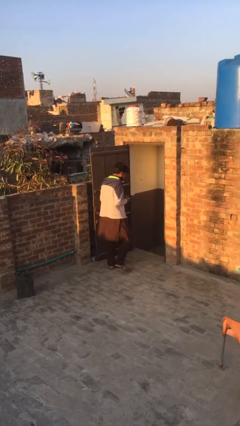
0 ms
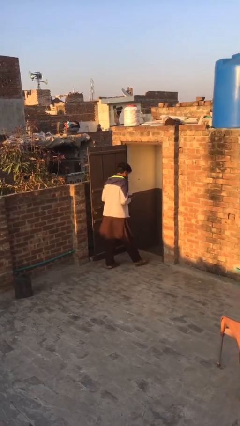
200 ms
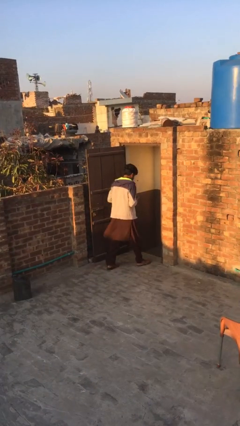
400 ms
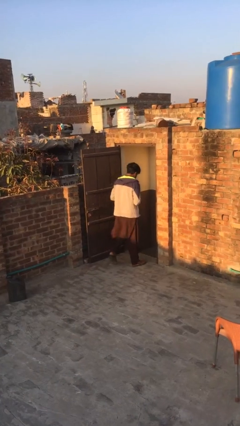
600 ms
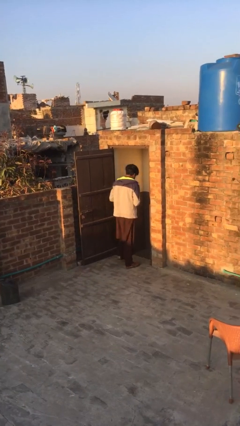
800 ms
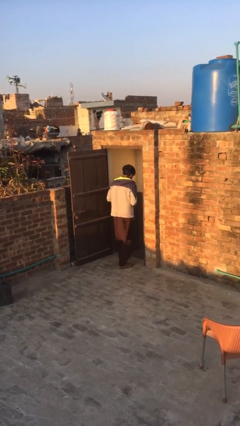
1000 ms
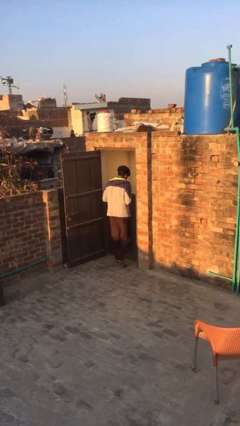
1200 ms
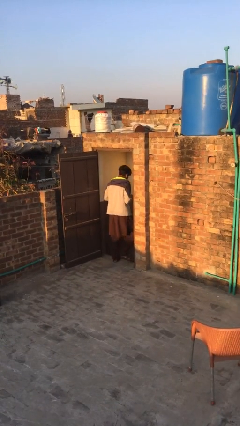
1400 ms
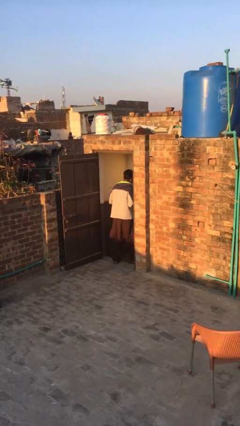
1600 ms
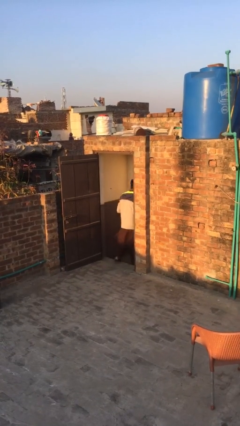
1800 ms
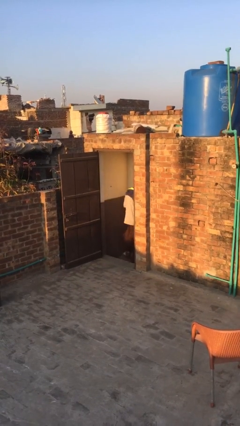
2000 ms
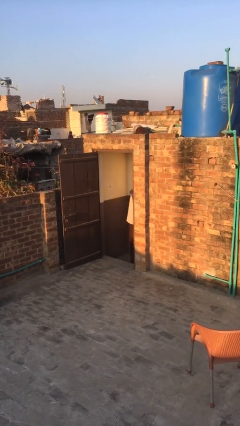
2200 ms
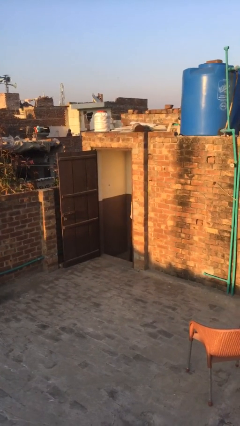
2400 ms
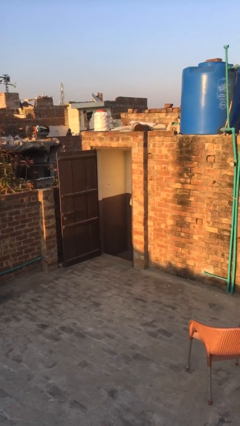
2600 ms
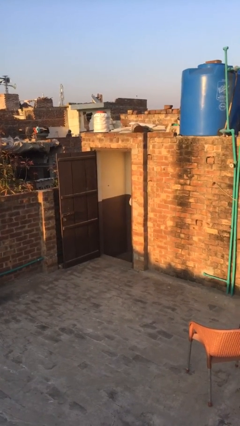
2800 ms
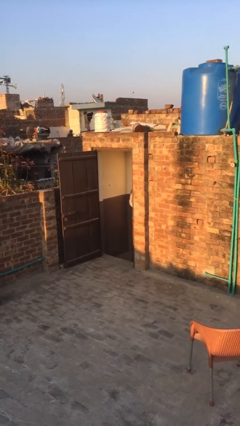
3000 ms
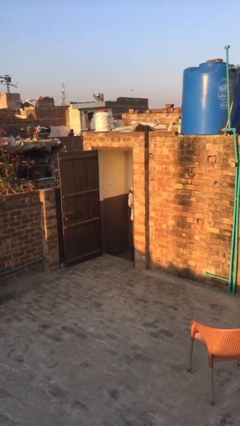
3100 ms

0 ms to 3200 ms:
person enters scene through structure

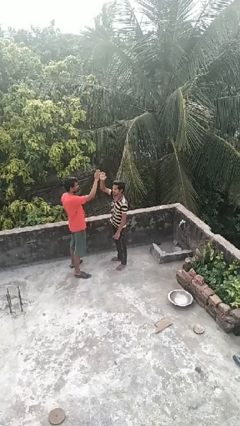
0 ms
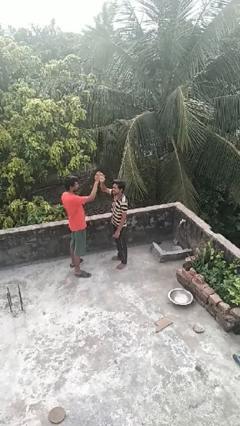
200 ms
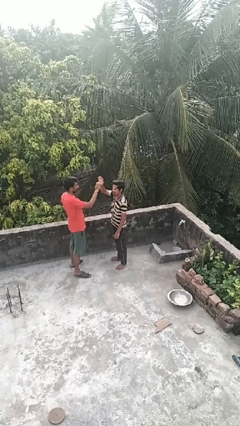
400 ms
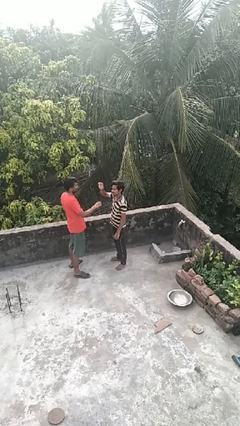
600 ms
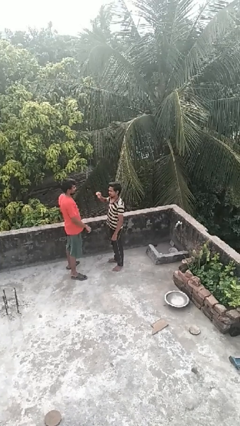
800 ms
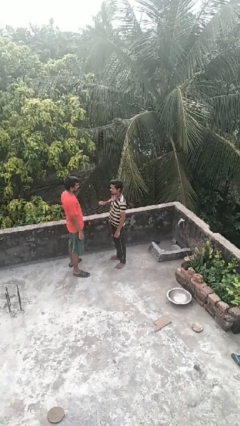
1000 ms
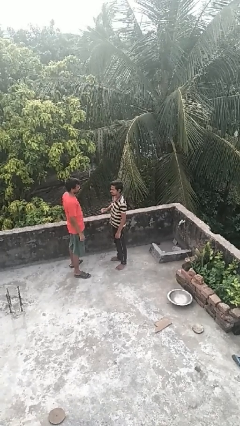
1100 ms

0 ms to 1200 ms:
person highfives hand

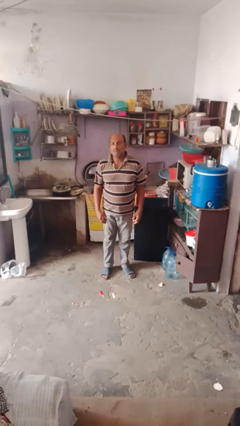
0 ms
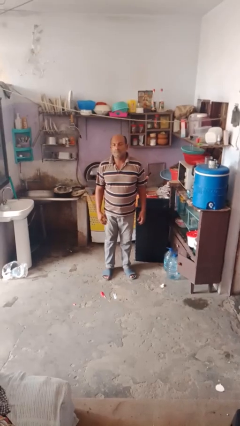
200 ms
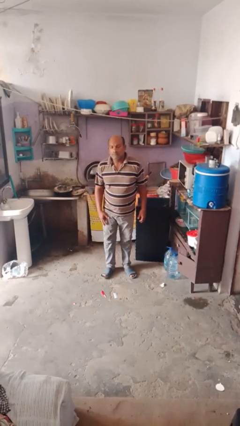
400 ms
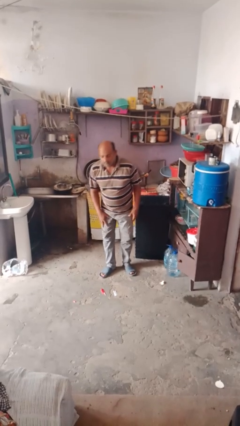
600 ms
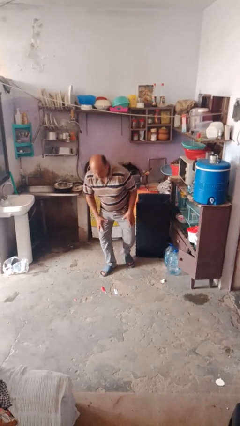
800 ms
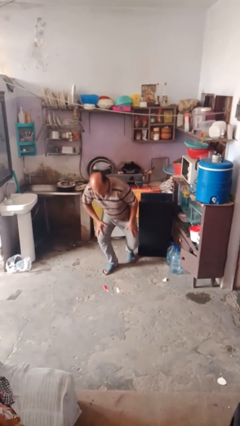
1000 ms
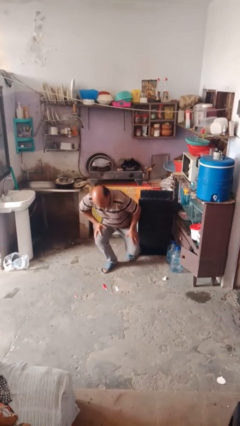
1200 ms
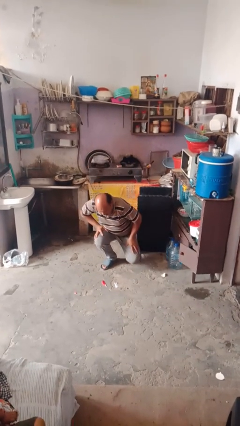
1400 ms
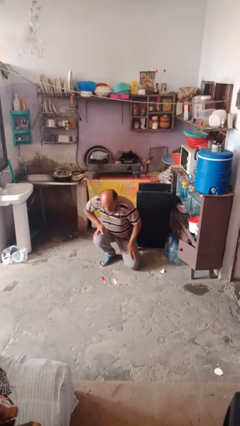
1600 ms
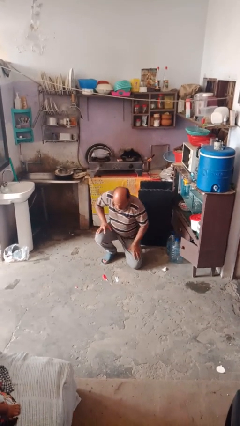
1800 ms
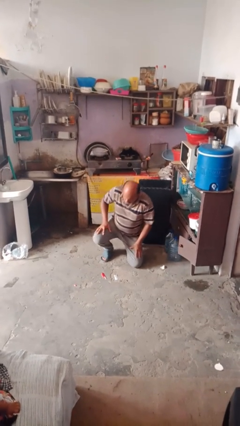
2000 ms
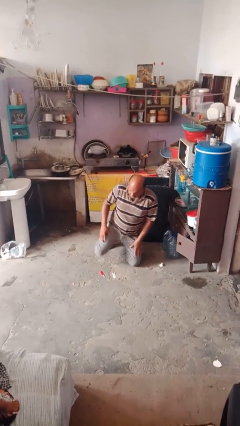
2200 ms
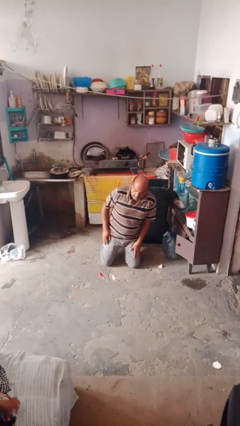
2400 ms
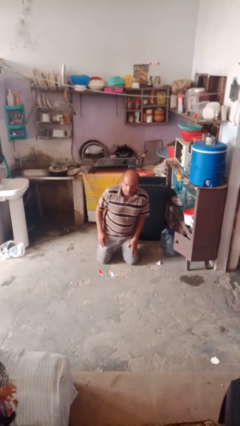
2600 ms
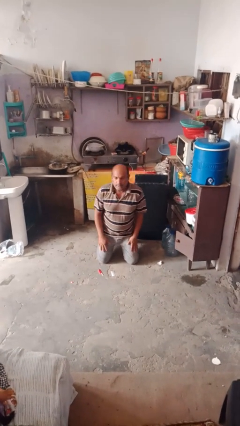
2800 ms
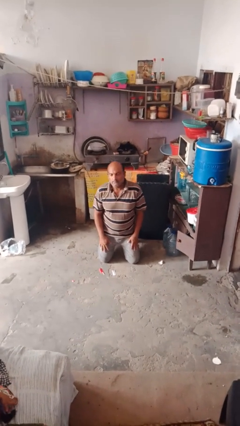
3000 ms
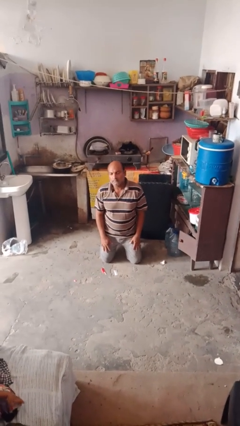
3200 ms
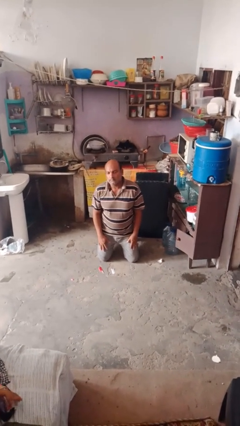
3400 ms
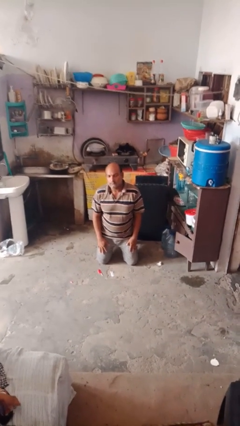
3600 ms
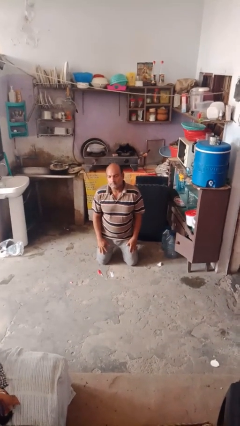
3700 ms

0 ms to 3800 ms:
person kneels

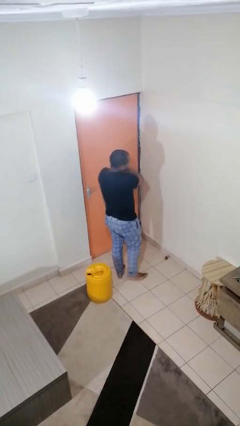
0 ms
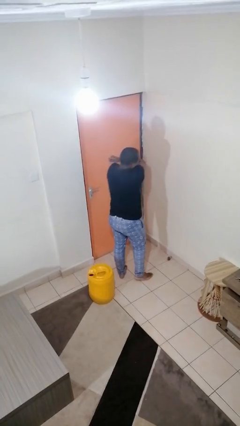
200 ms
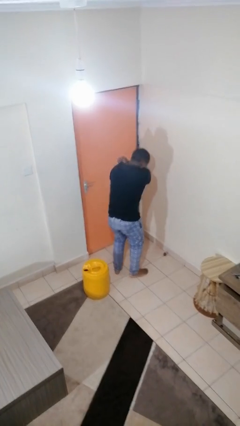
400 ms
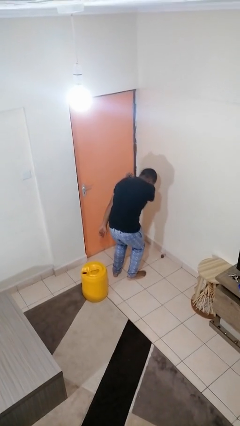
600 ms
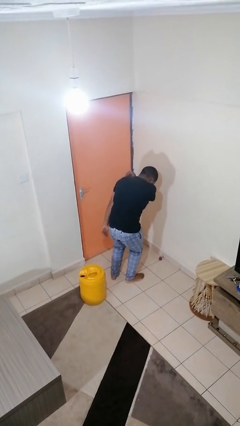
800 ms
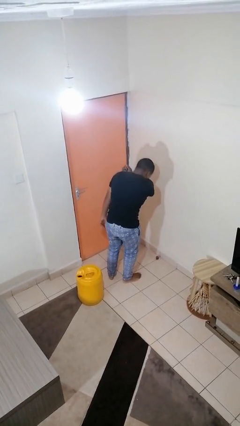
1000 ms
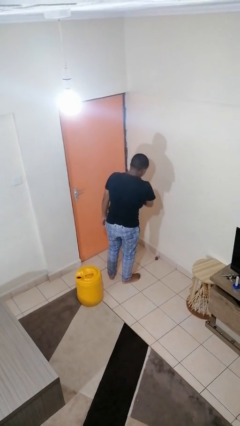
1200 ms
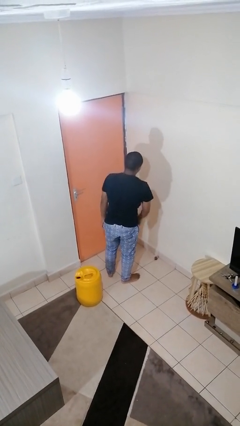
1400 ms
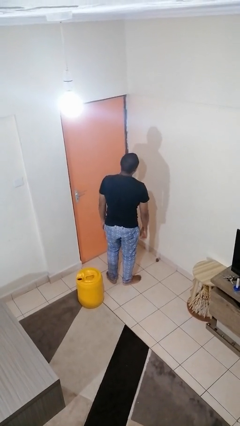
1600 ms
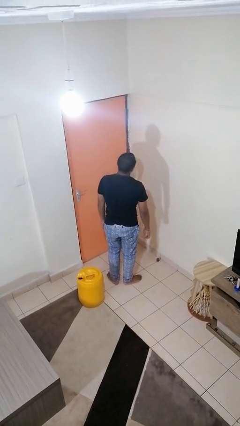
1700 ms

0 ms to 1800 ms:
person sneezes into arm

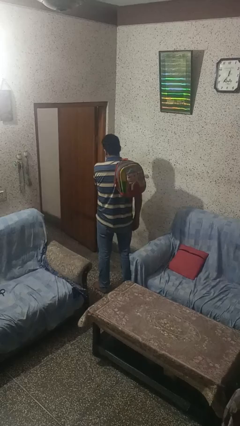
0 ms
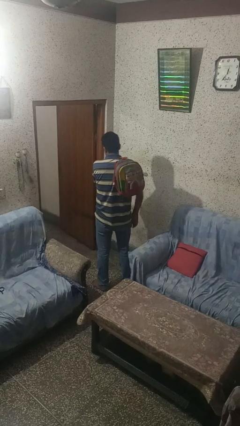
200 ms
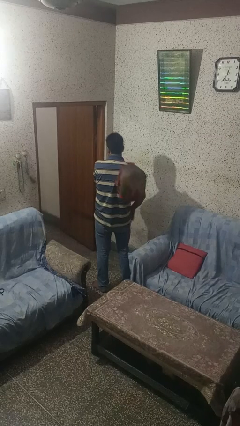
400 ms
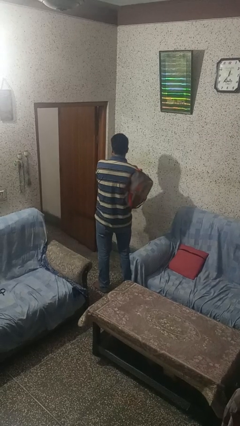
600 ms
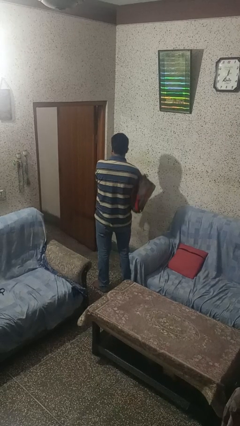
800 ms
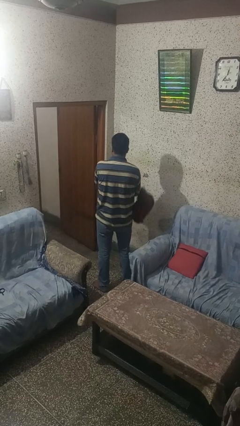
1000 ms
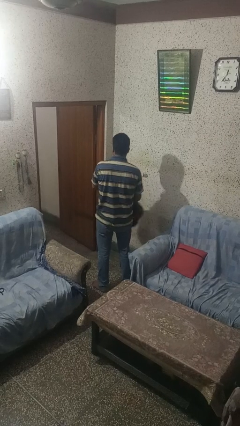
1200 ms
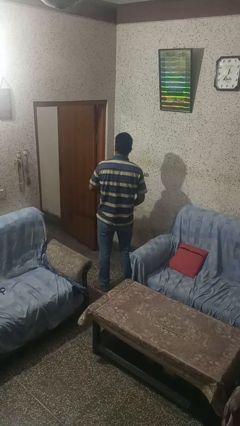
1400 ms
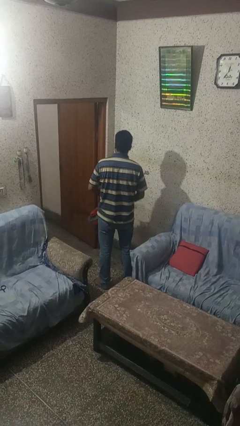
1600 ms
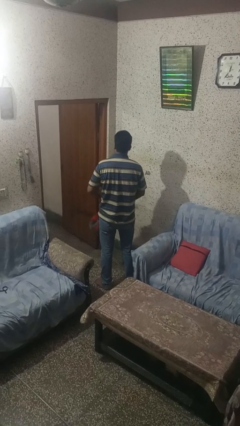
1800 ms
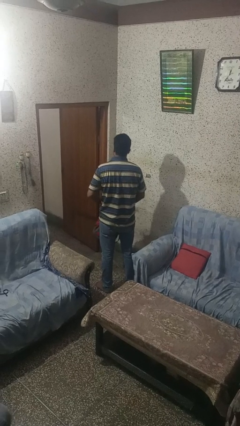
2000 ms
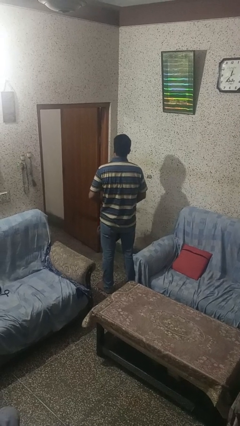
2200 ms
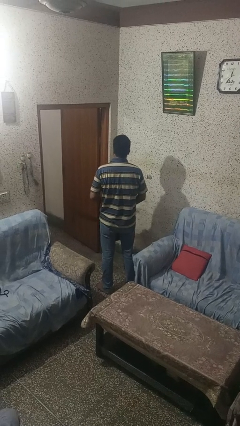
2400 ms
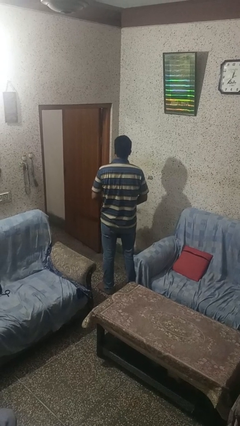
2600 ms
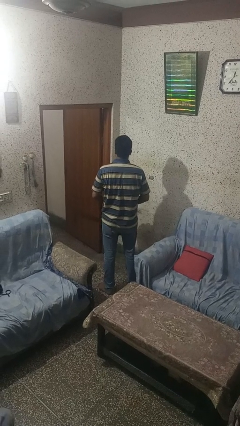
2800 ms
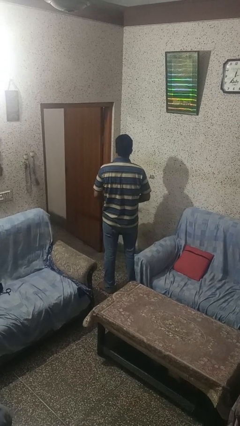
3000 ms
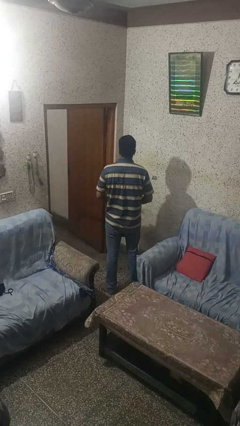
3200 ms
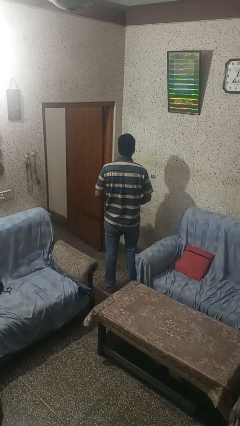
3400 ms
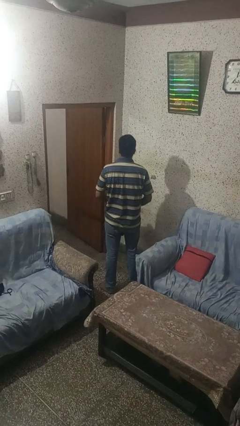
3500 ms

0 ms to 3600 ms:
person takes off backpack

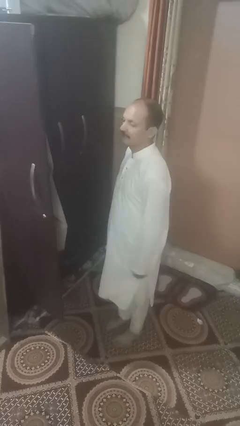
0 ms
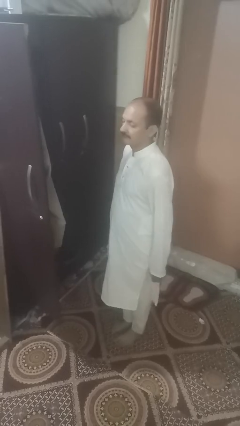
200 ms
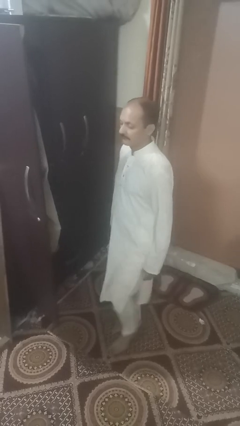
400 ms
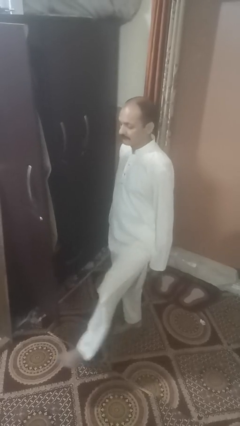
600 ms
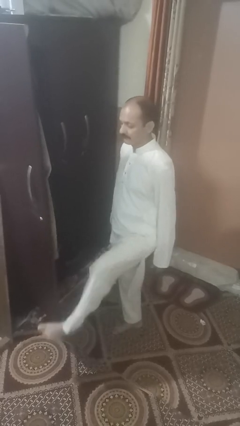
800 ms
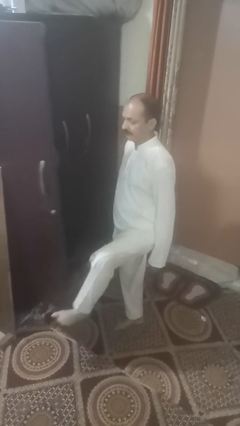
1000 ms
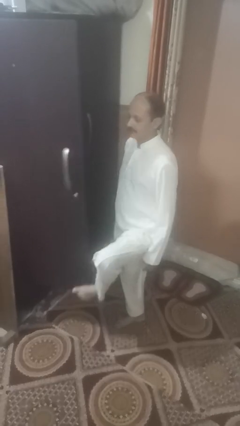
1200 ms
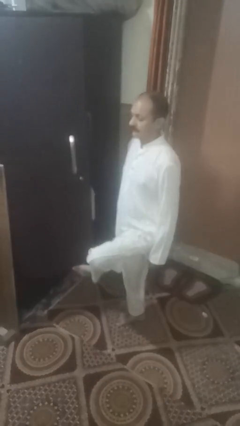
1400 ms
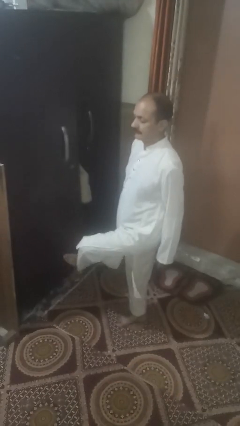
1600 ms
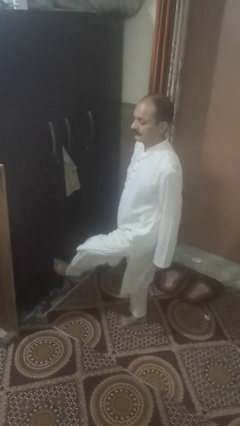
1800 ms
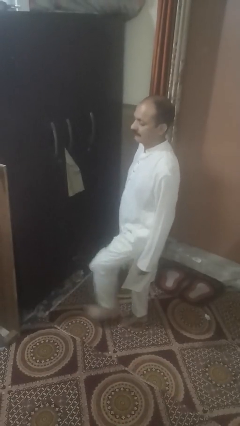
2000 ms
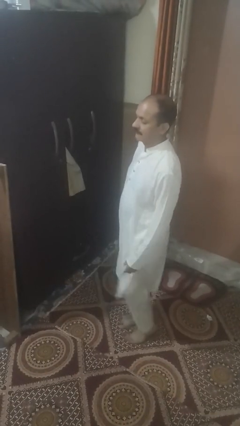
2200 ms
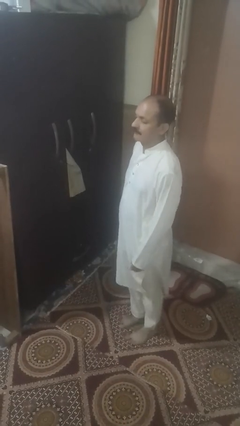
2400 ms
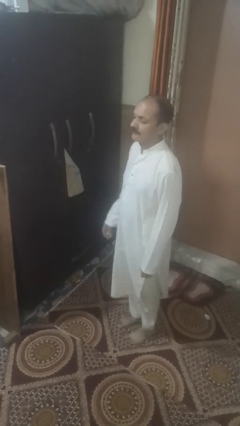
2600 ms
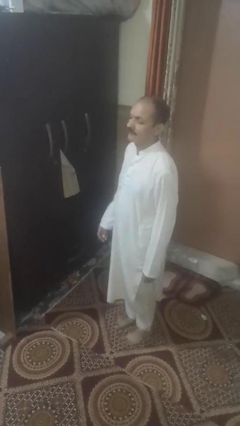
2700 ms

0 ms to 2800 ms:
person closes door with foot

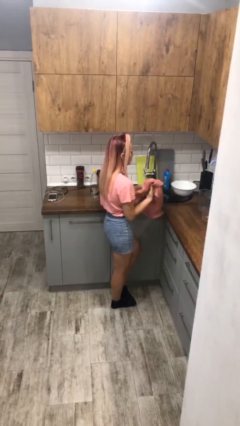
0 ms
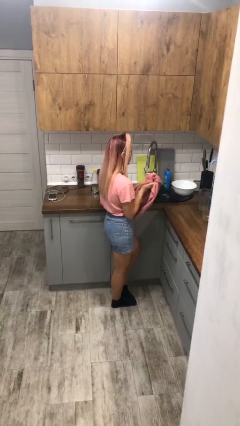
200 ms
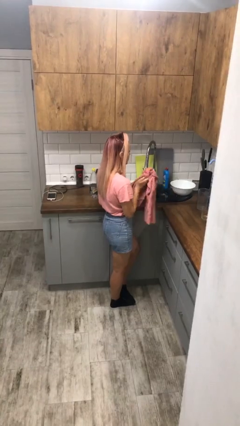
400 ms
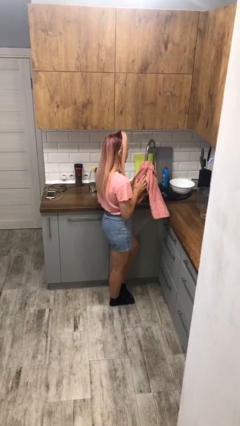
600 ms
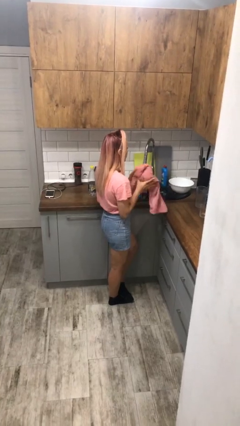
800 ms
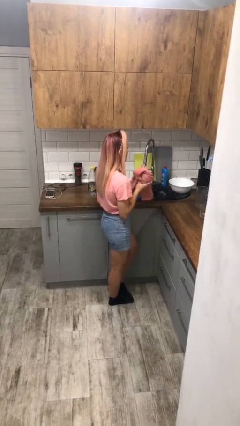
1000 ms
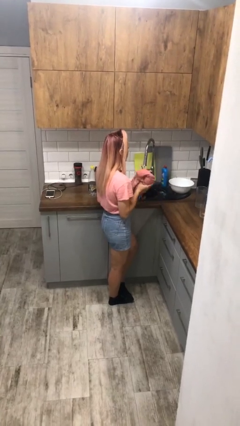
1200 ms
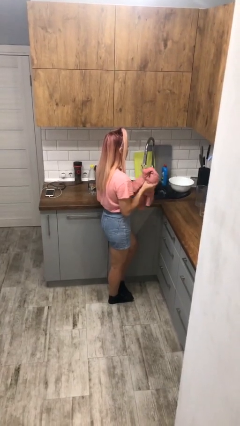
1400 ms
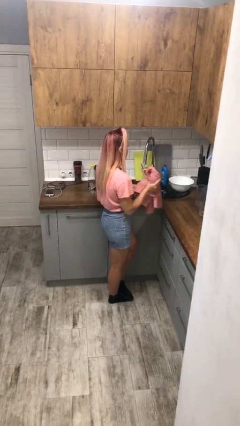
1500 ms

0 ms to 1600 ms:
person dries hands with towel
